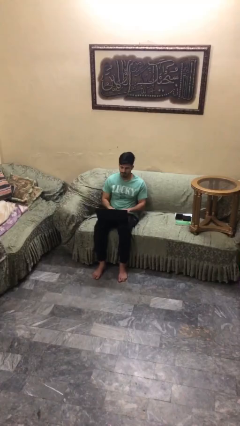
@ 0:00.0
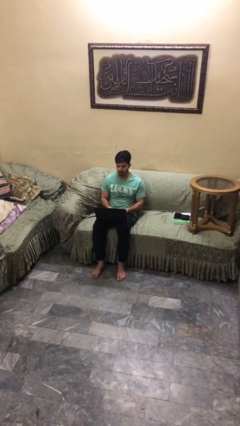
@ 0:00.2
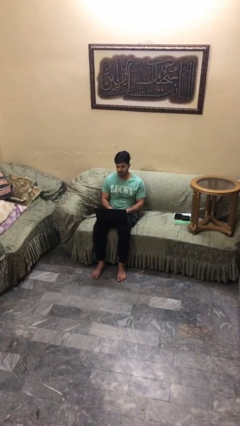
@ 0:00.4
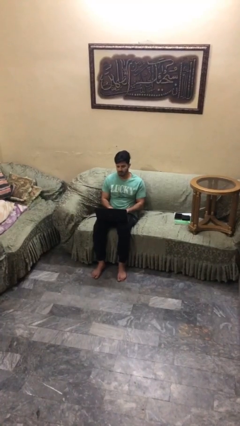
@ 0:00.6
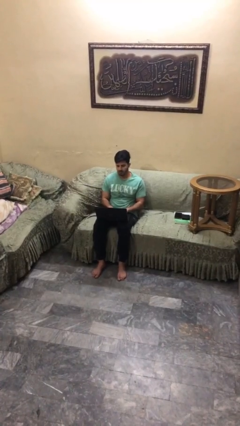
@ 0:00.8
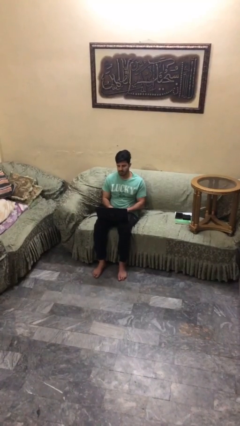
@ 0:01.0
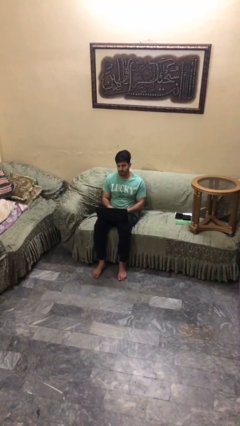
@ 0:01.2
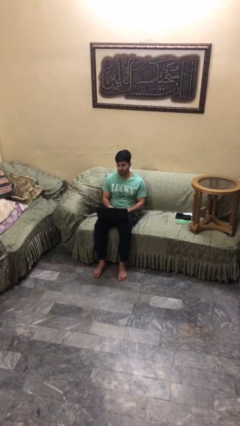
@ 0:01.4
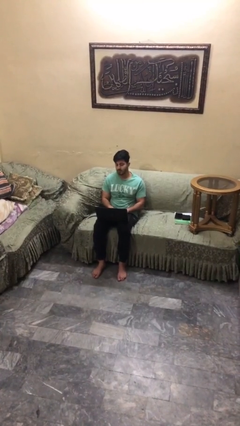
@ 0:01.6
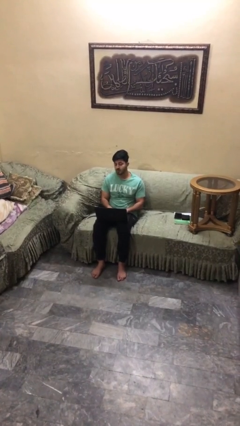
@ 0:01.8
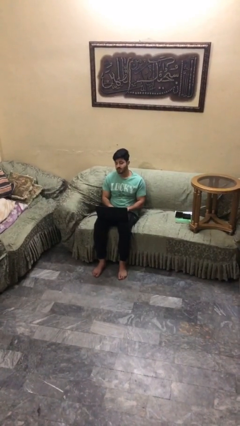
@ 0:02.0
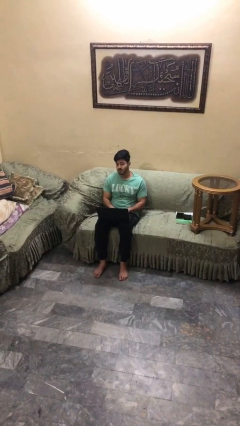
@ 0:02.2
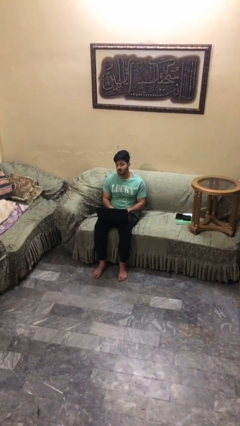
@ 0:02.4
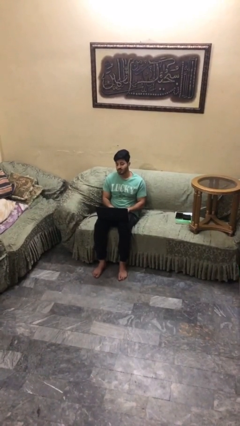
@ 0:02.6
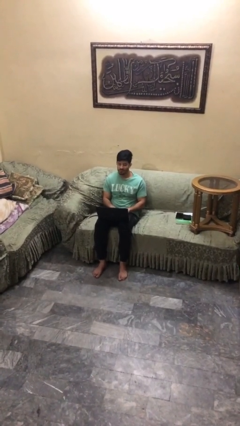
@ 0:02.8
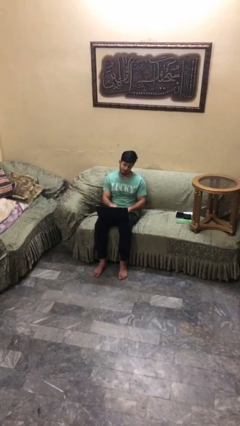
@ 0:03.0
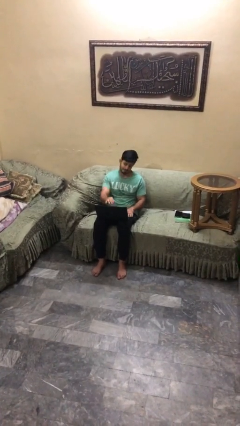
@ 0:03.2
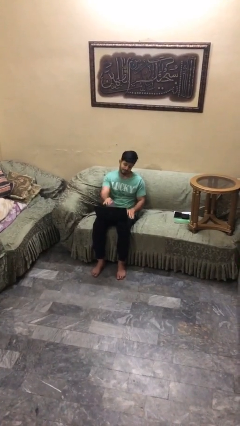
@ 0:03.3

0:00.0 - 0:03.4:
person interacts with laptop

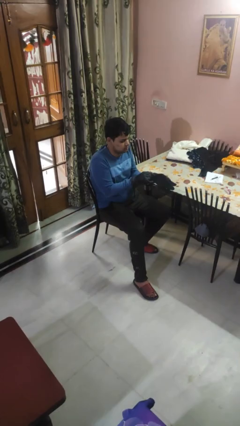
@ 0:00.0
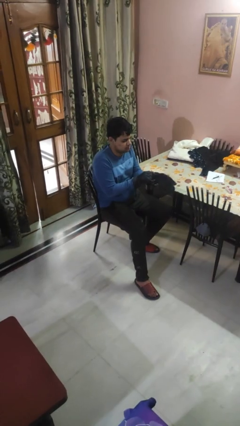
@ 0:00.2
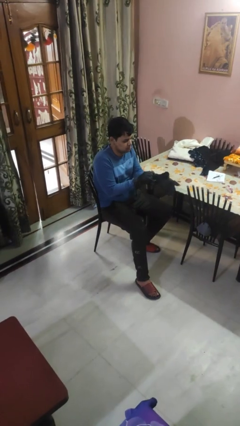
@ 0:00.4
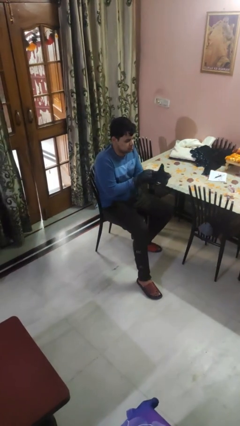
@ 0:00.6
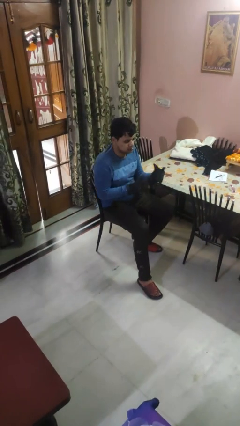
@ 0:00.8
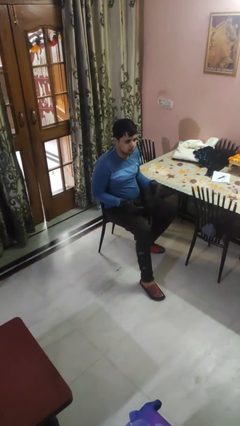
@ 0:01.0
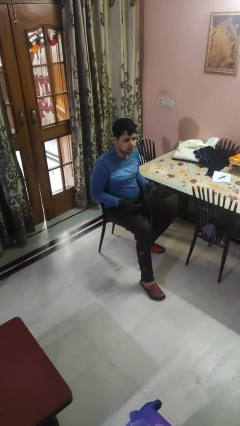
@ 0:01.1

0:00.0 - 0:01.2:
person puts on gloves

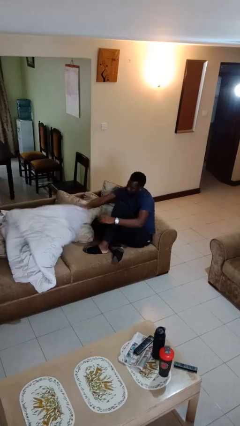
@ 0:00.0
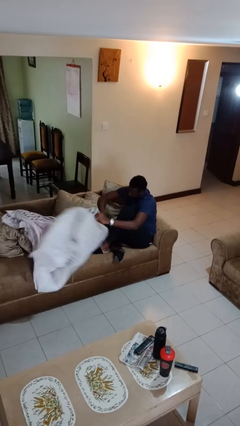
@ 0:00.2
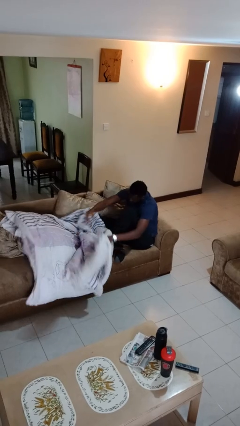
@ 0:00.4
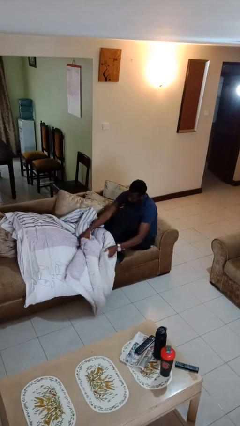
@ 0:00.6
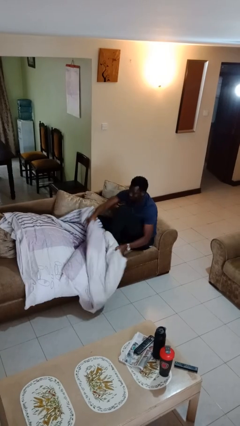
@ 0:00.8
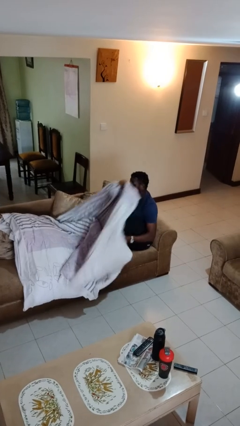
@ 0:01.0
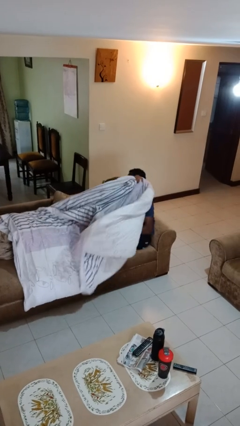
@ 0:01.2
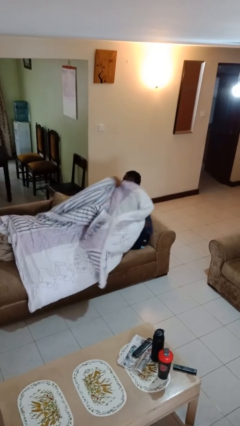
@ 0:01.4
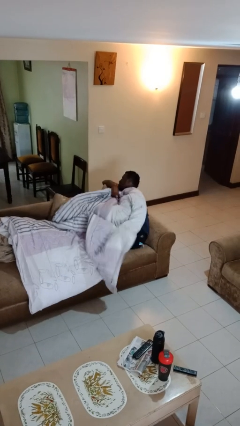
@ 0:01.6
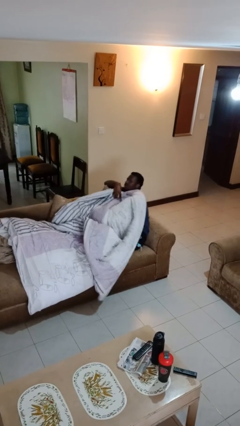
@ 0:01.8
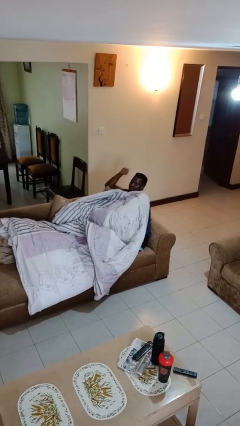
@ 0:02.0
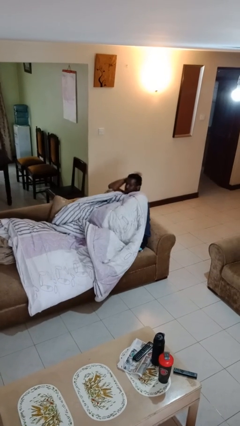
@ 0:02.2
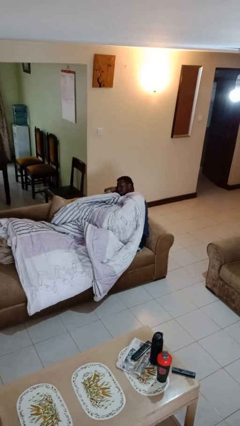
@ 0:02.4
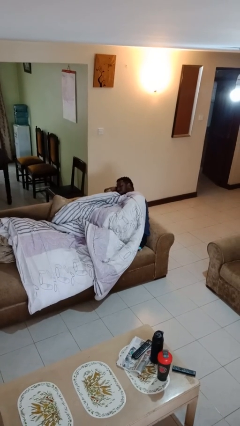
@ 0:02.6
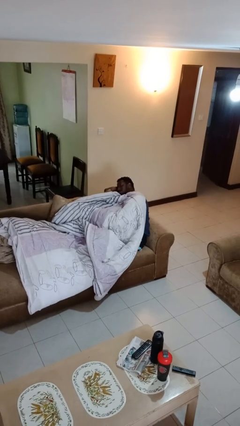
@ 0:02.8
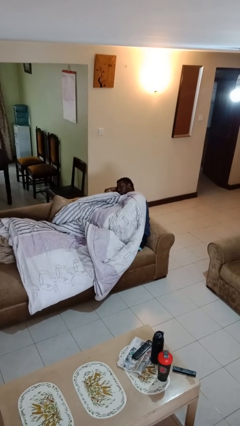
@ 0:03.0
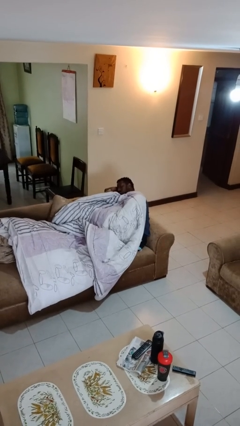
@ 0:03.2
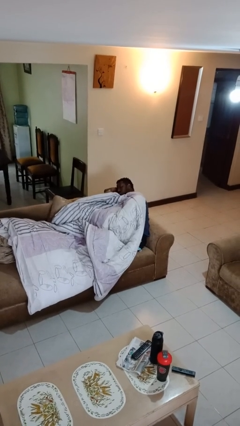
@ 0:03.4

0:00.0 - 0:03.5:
person covers with blanket

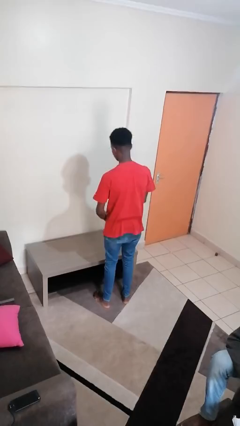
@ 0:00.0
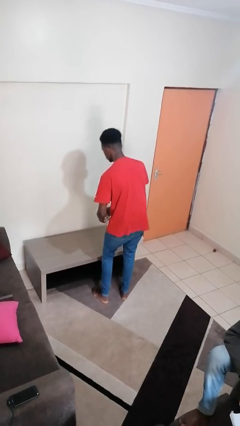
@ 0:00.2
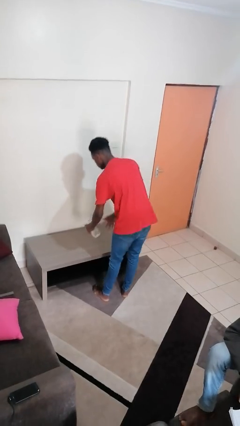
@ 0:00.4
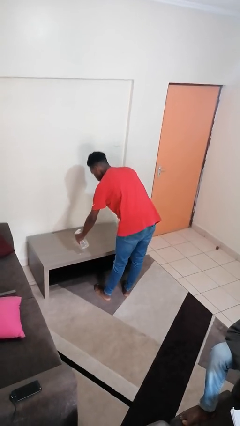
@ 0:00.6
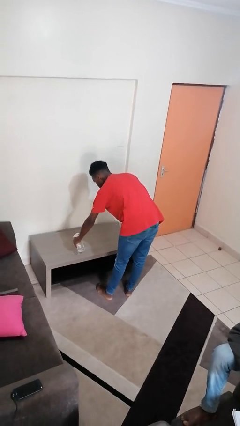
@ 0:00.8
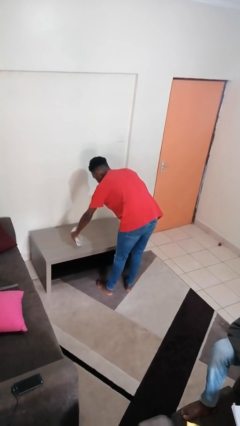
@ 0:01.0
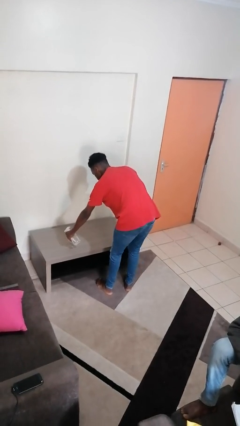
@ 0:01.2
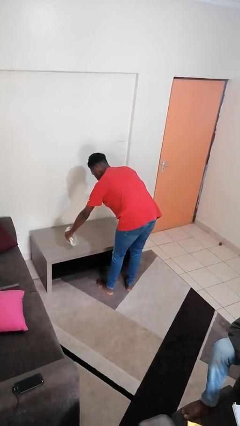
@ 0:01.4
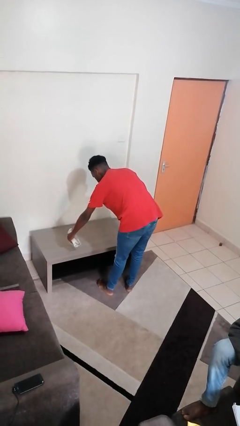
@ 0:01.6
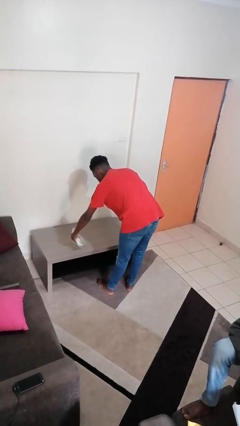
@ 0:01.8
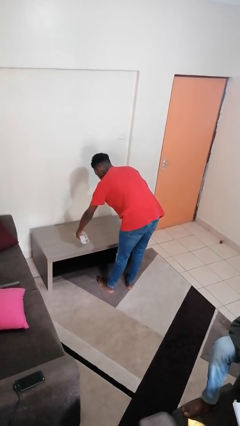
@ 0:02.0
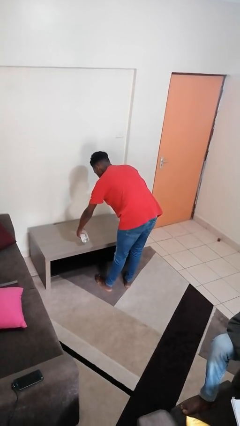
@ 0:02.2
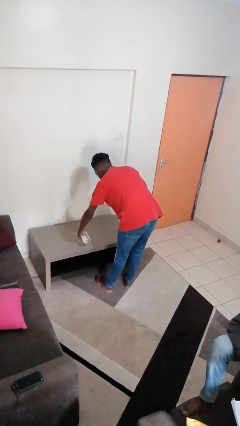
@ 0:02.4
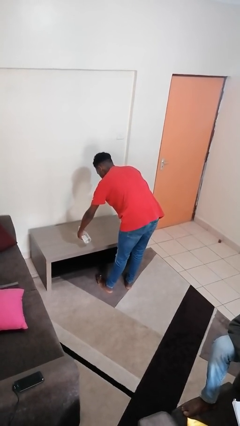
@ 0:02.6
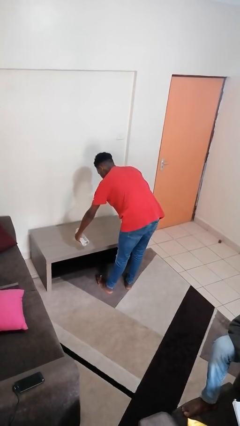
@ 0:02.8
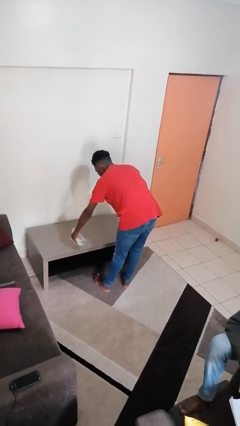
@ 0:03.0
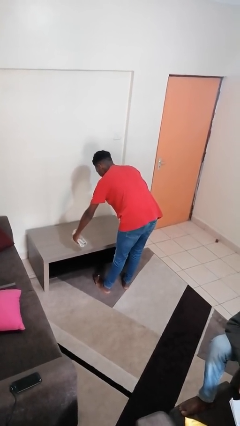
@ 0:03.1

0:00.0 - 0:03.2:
person sprays from bottle

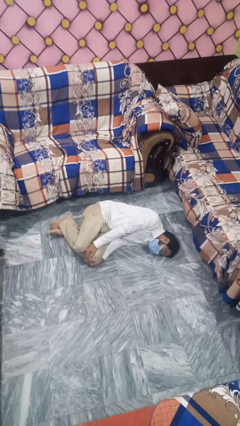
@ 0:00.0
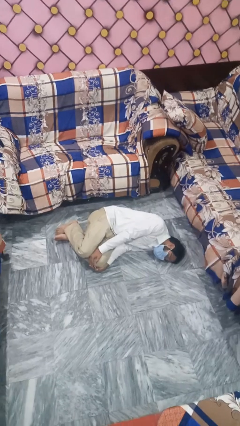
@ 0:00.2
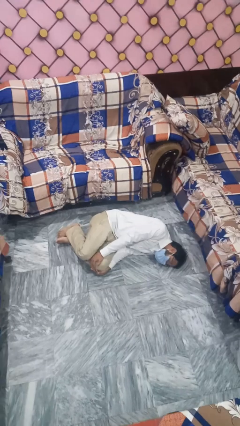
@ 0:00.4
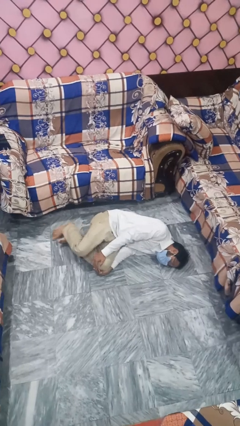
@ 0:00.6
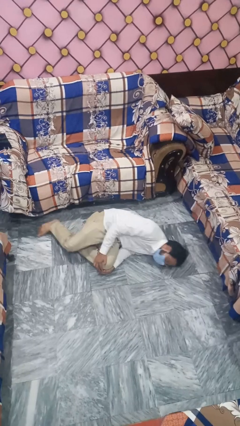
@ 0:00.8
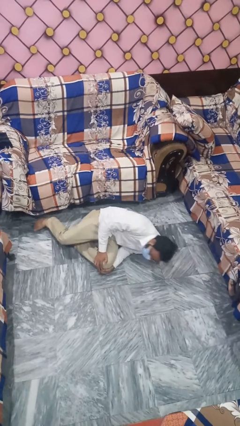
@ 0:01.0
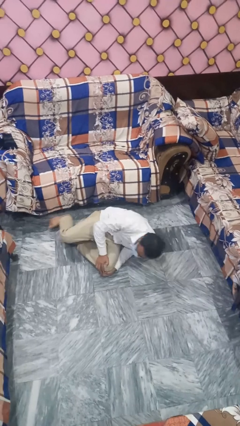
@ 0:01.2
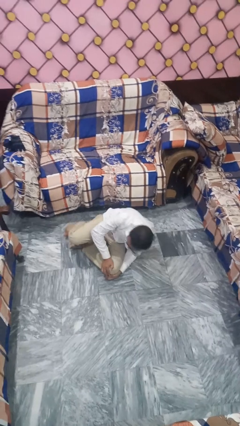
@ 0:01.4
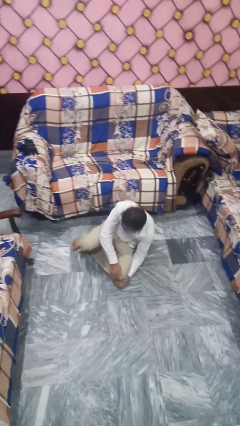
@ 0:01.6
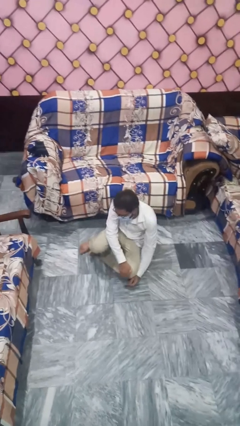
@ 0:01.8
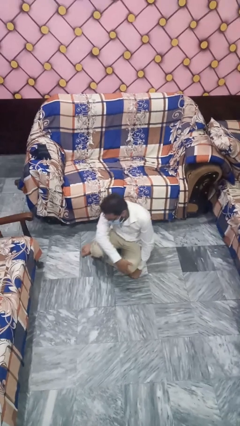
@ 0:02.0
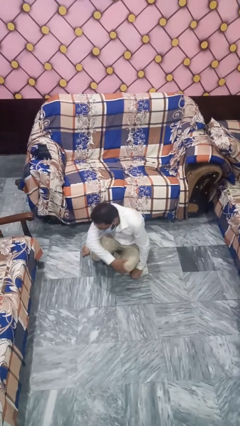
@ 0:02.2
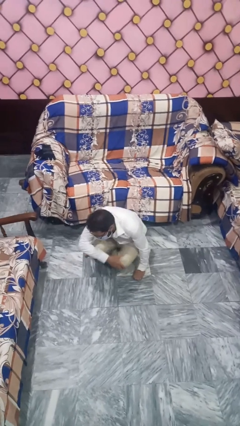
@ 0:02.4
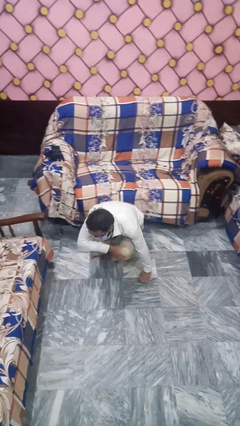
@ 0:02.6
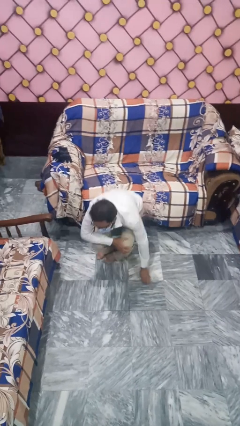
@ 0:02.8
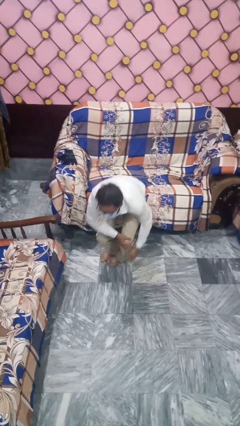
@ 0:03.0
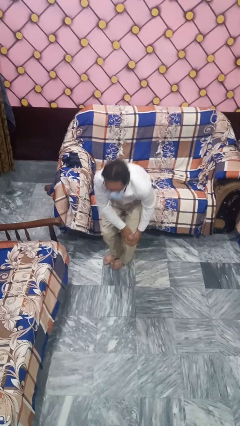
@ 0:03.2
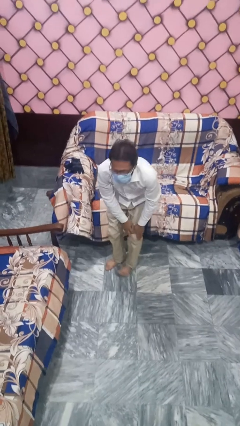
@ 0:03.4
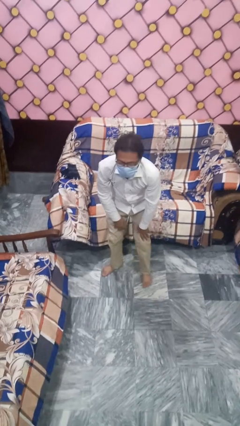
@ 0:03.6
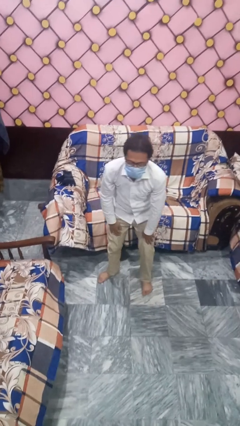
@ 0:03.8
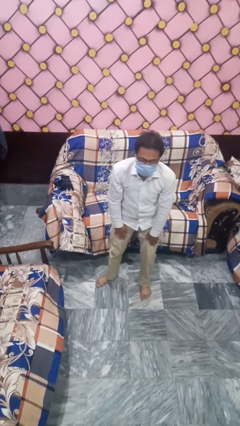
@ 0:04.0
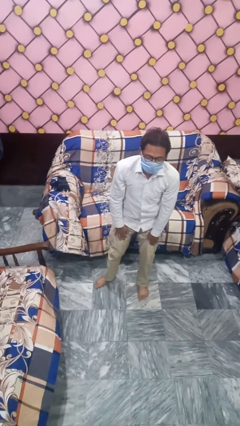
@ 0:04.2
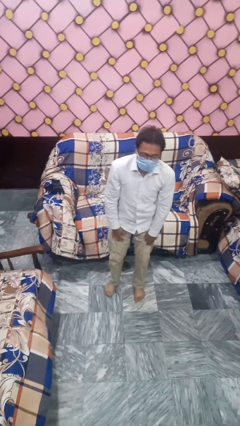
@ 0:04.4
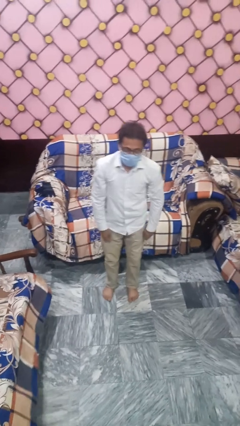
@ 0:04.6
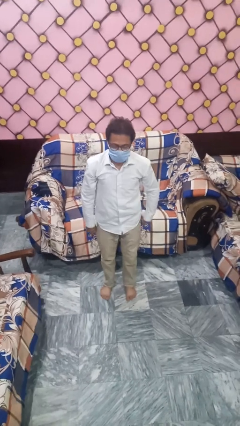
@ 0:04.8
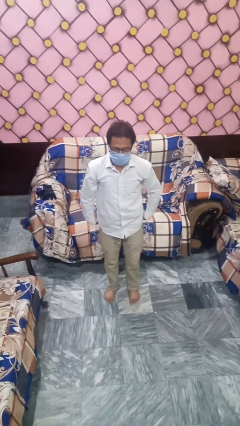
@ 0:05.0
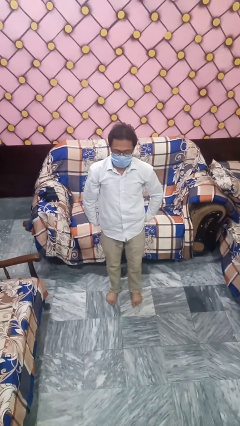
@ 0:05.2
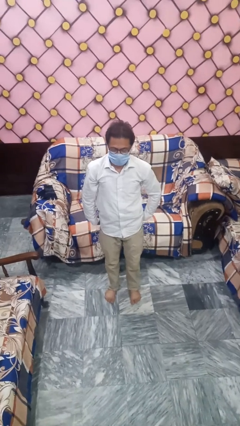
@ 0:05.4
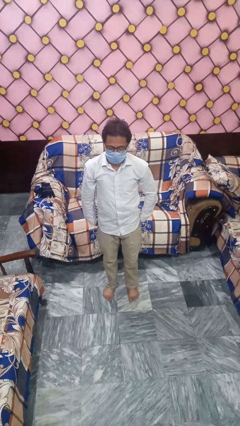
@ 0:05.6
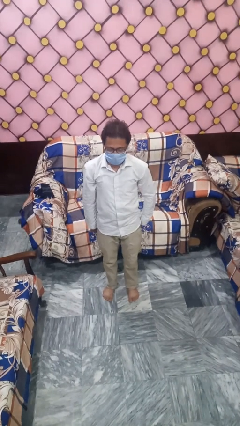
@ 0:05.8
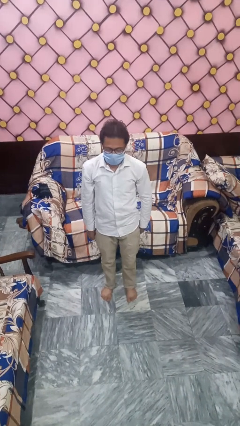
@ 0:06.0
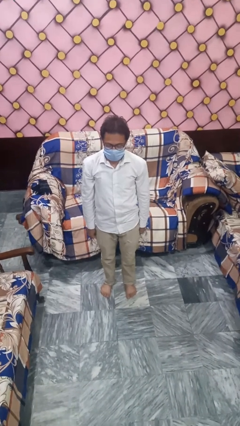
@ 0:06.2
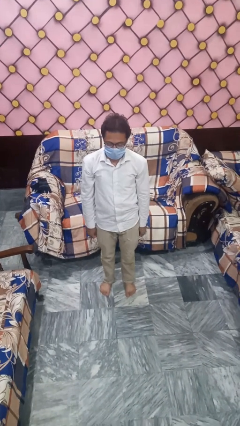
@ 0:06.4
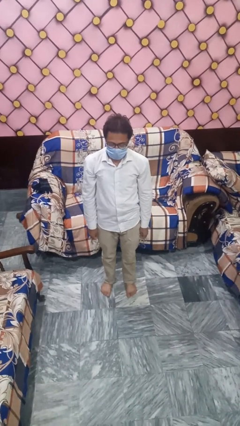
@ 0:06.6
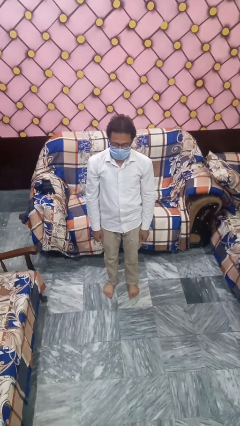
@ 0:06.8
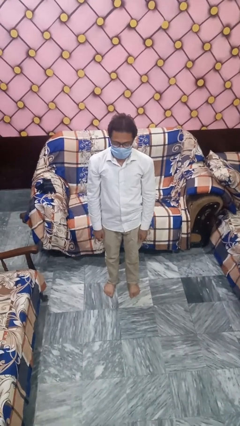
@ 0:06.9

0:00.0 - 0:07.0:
person stands up from floor
